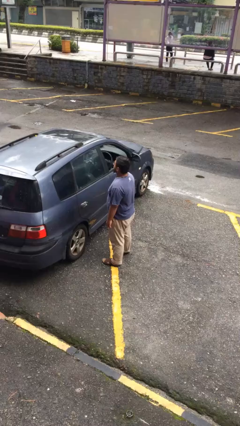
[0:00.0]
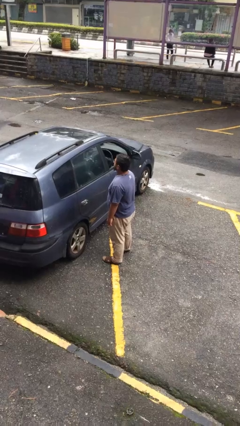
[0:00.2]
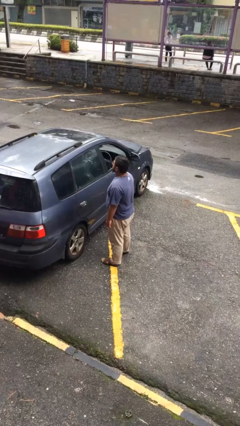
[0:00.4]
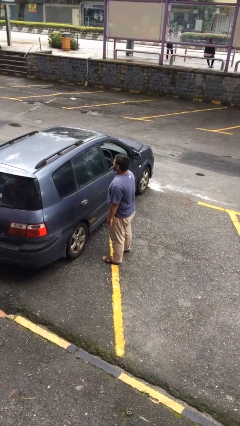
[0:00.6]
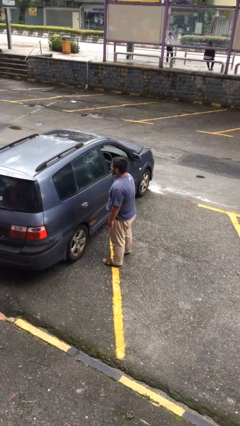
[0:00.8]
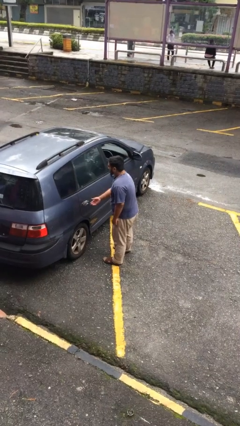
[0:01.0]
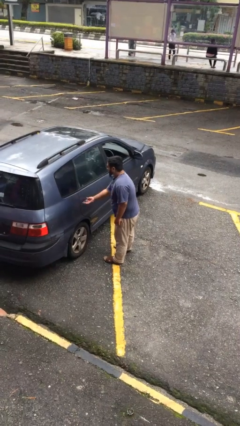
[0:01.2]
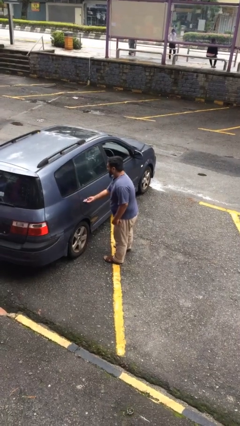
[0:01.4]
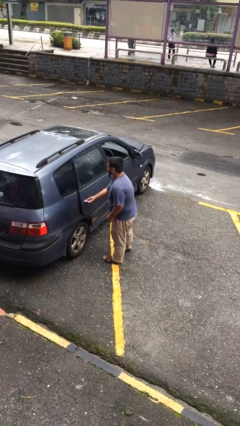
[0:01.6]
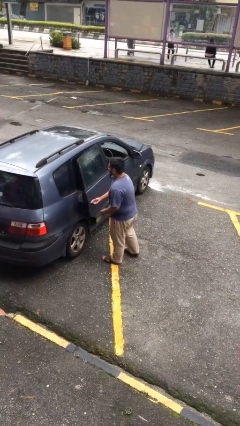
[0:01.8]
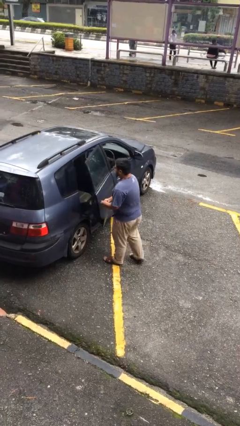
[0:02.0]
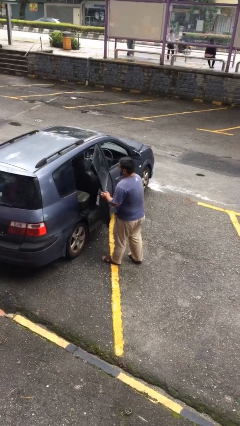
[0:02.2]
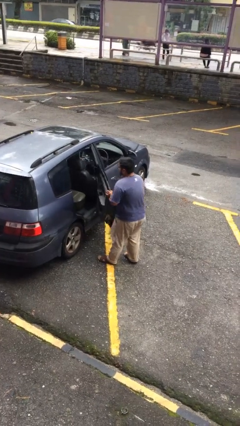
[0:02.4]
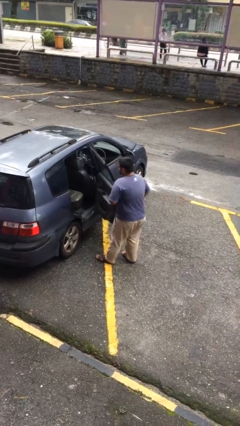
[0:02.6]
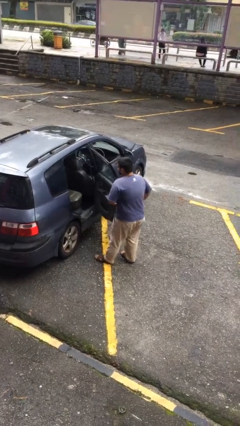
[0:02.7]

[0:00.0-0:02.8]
person opens car door

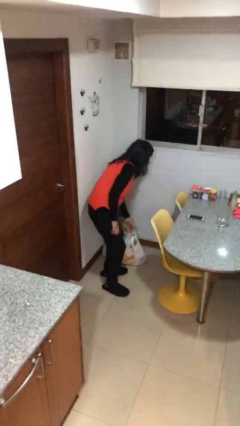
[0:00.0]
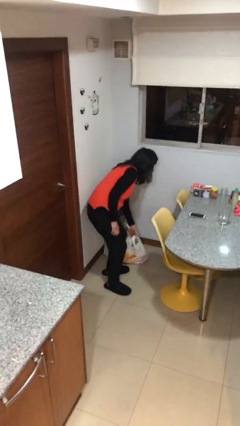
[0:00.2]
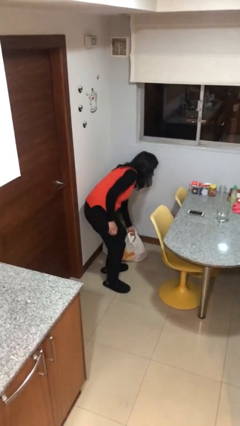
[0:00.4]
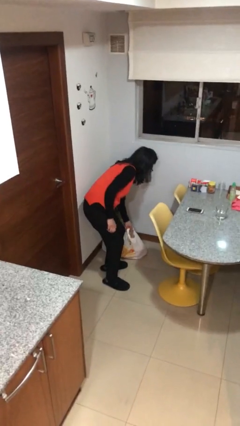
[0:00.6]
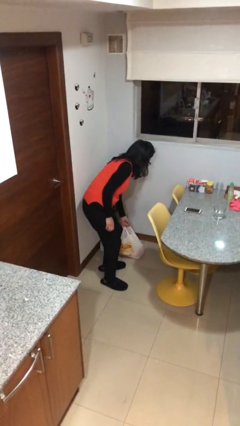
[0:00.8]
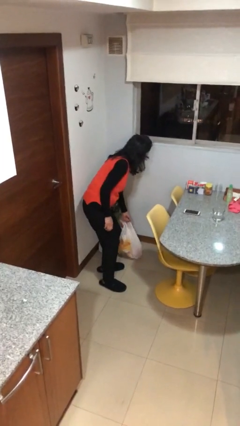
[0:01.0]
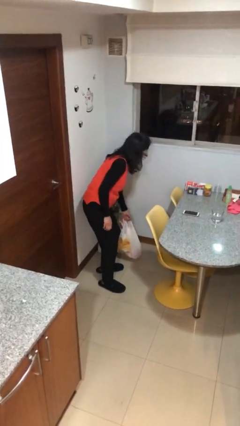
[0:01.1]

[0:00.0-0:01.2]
person picks up object from floor

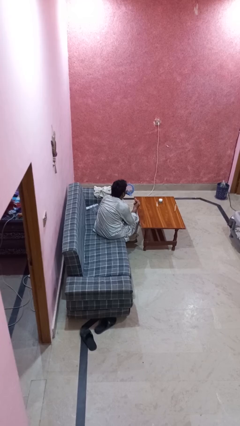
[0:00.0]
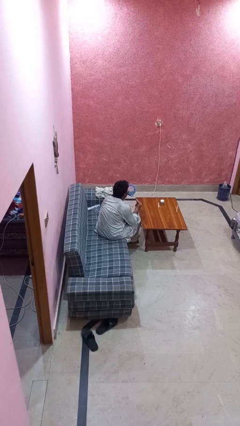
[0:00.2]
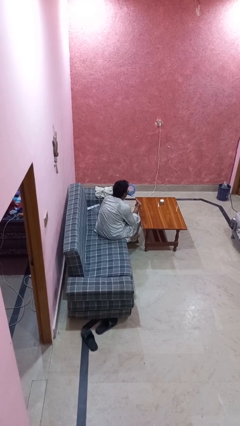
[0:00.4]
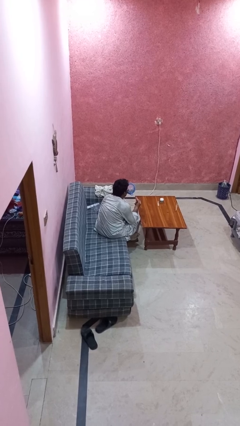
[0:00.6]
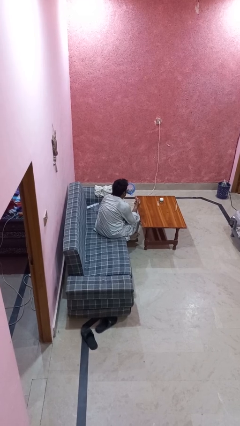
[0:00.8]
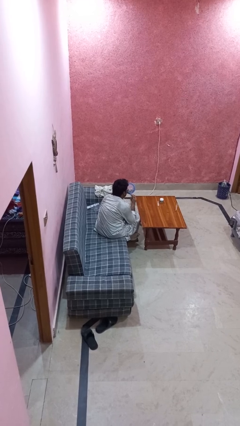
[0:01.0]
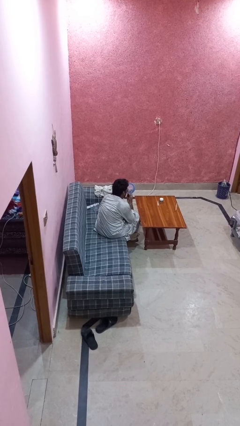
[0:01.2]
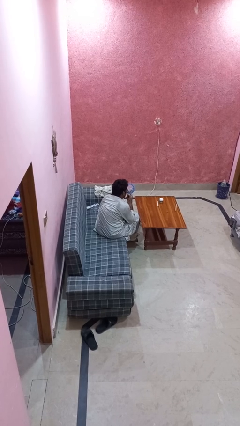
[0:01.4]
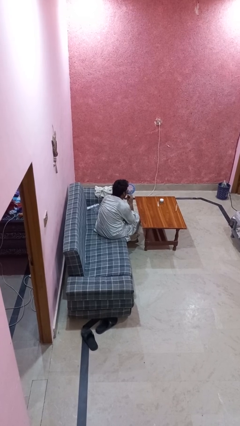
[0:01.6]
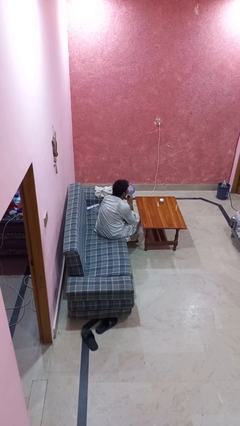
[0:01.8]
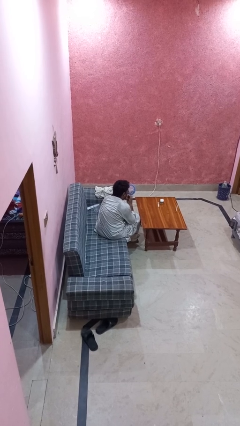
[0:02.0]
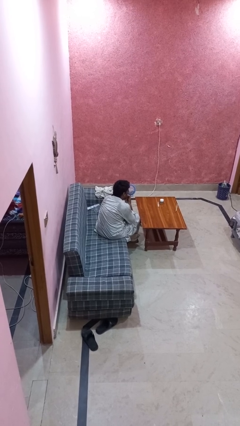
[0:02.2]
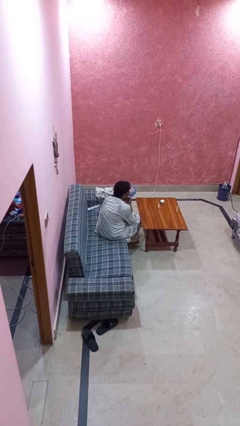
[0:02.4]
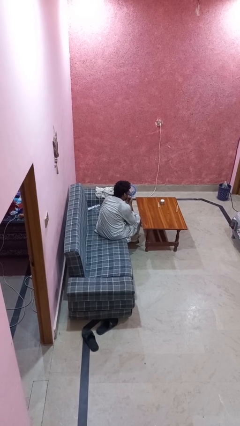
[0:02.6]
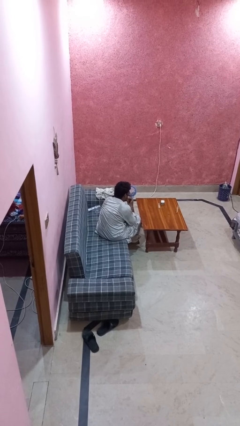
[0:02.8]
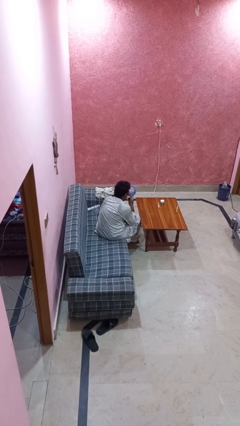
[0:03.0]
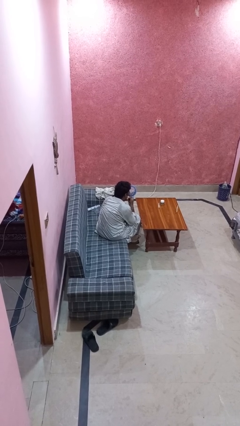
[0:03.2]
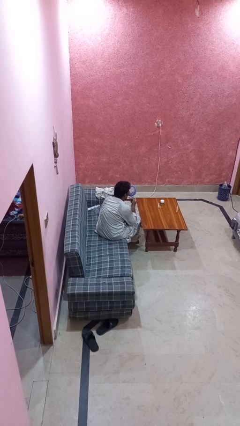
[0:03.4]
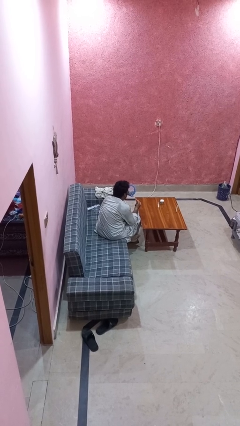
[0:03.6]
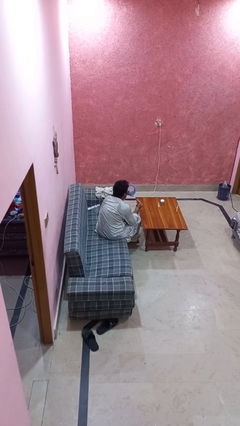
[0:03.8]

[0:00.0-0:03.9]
person applies lip makeup

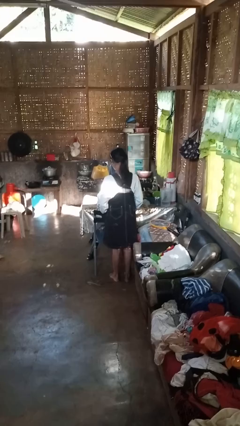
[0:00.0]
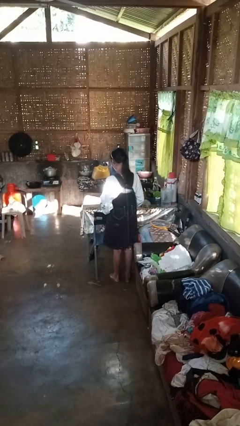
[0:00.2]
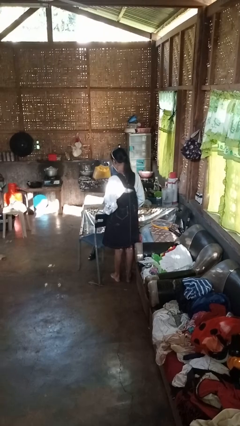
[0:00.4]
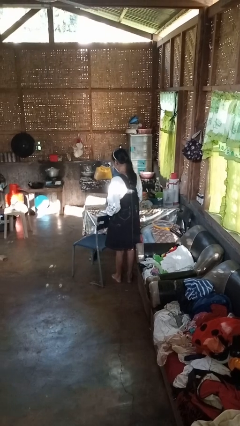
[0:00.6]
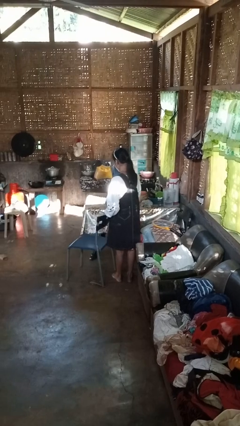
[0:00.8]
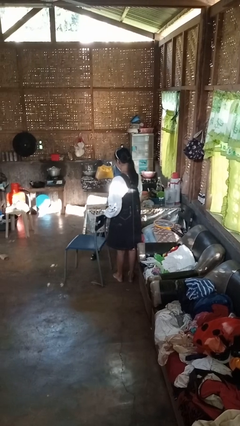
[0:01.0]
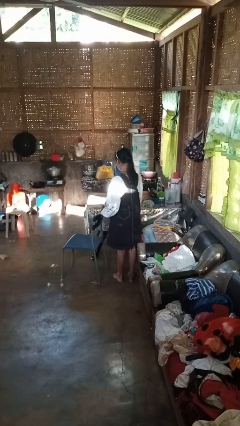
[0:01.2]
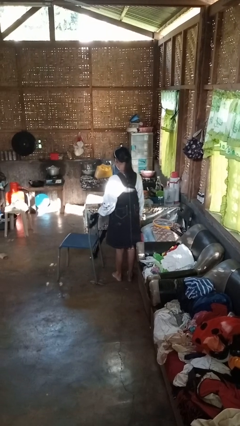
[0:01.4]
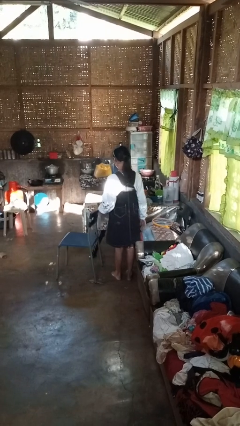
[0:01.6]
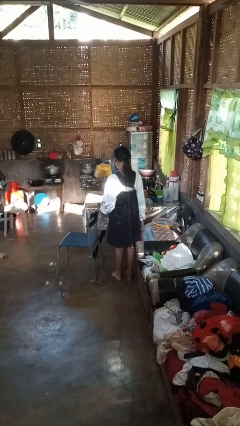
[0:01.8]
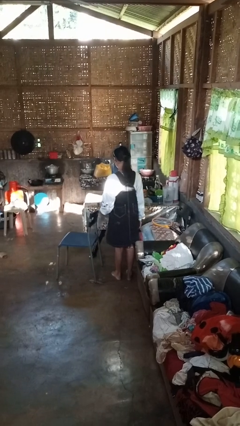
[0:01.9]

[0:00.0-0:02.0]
person pulls out chair

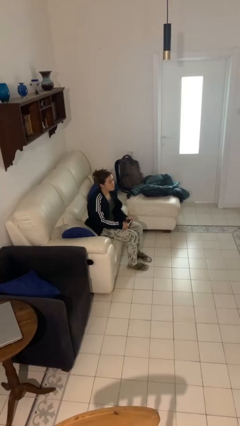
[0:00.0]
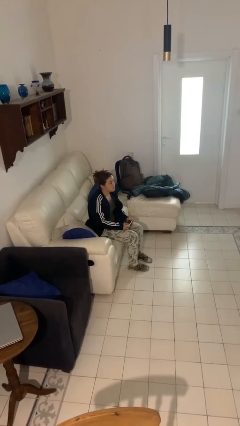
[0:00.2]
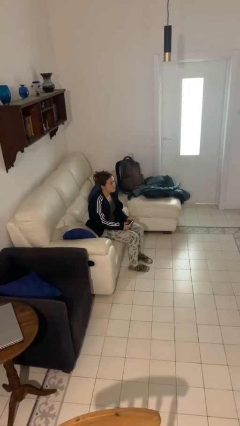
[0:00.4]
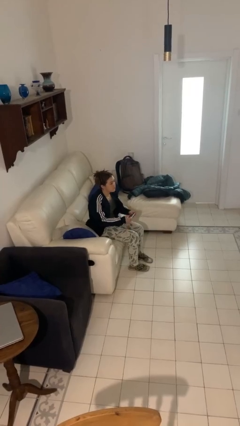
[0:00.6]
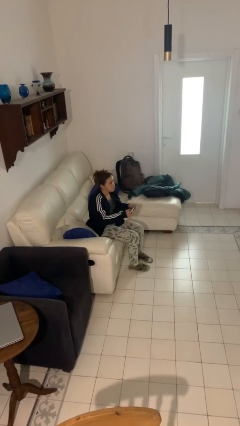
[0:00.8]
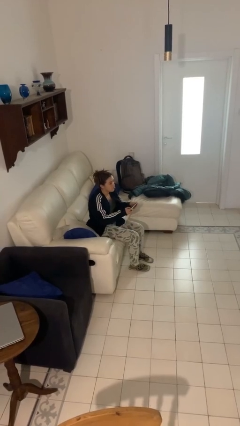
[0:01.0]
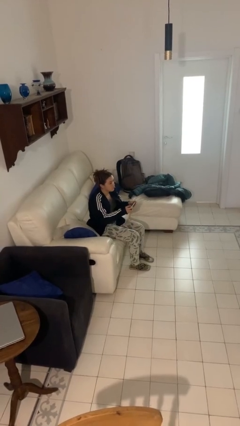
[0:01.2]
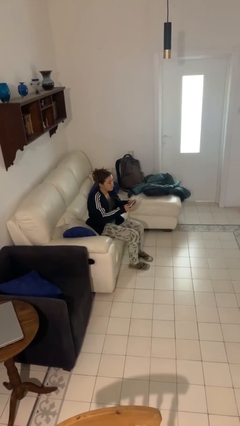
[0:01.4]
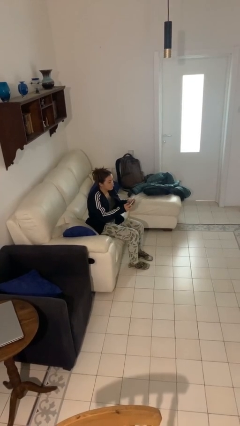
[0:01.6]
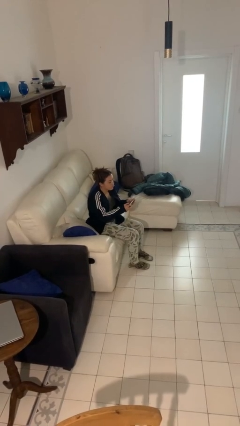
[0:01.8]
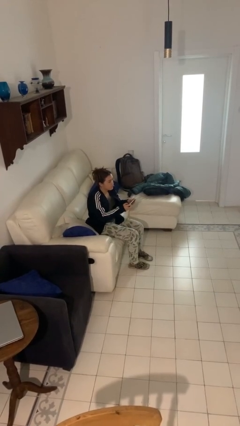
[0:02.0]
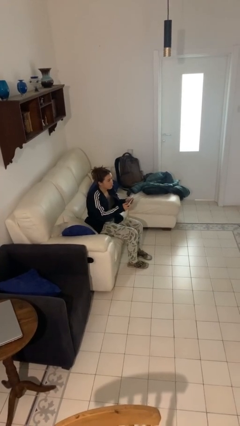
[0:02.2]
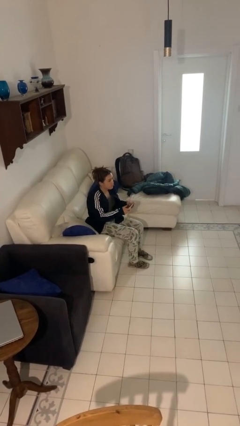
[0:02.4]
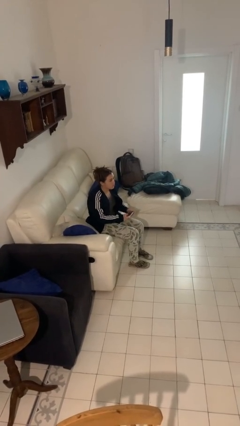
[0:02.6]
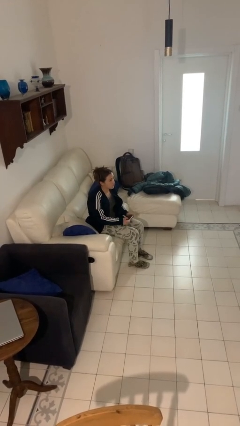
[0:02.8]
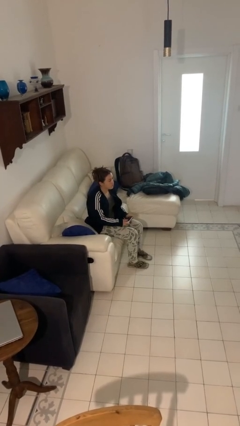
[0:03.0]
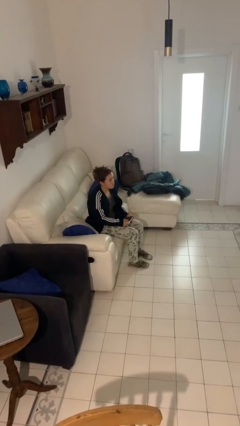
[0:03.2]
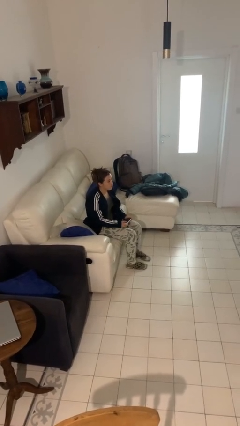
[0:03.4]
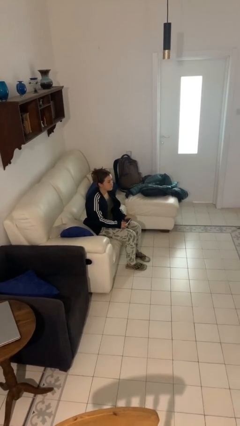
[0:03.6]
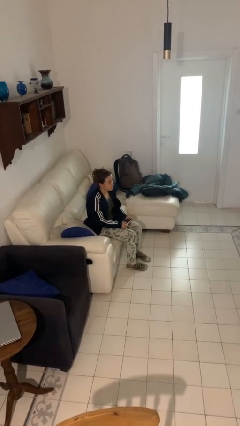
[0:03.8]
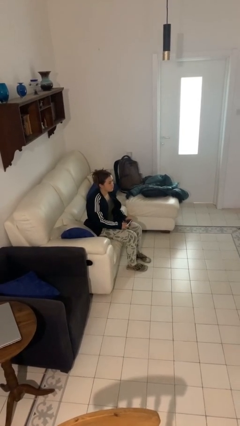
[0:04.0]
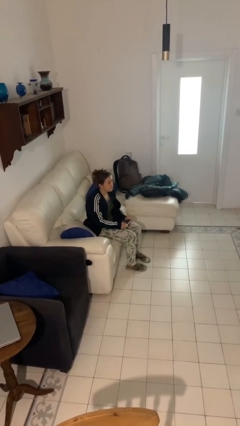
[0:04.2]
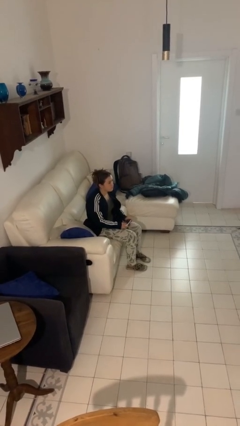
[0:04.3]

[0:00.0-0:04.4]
person interacts with handheld game

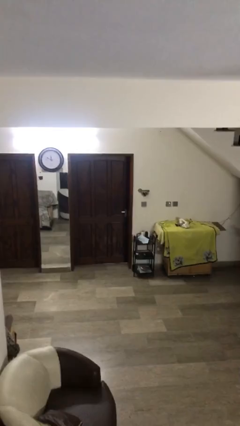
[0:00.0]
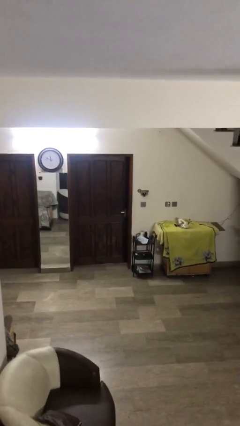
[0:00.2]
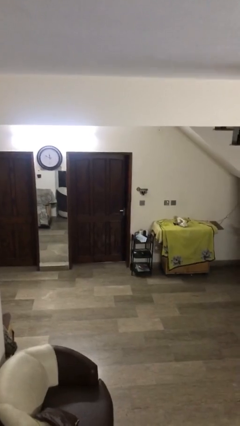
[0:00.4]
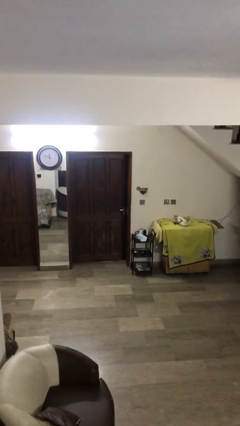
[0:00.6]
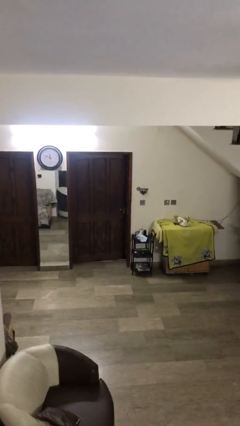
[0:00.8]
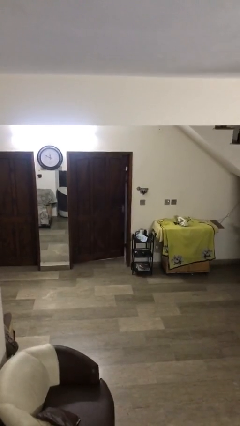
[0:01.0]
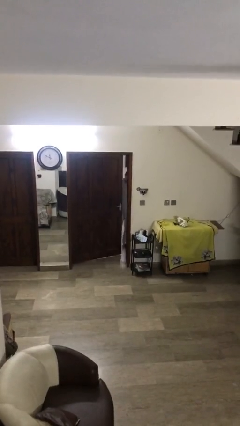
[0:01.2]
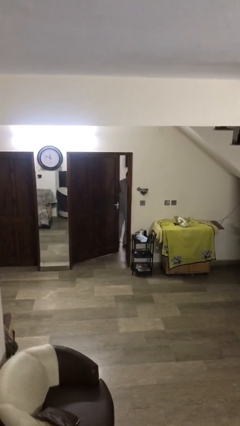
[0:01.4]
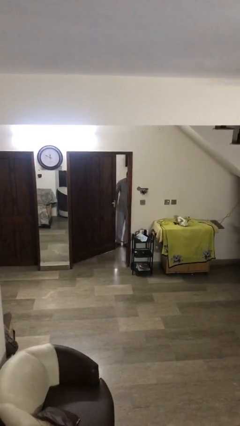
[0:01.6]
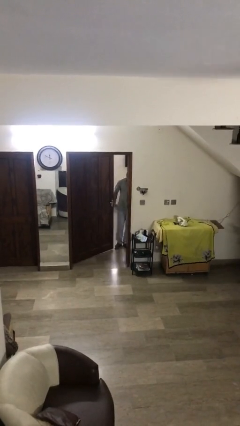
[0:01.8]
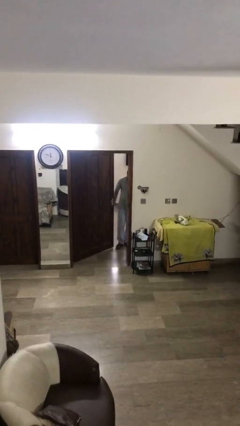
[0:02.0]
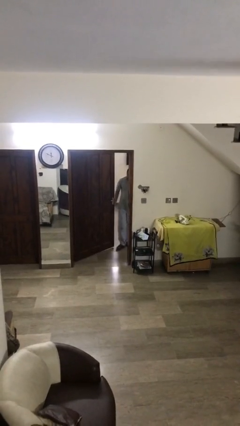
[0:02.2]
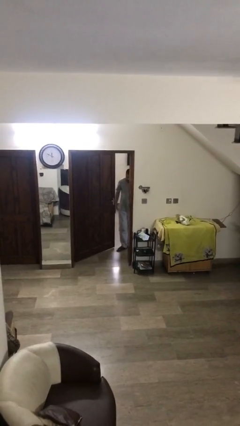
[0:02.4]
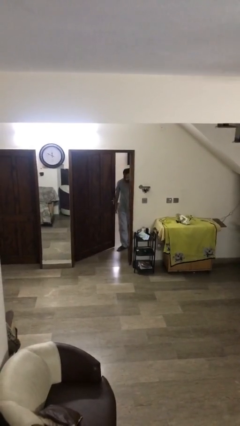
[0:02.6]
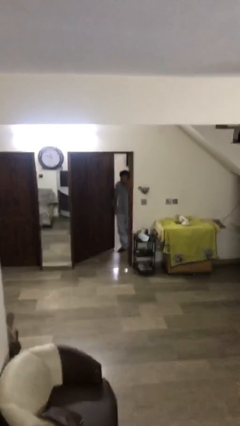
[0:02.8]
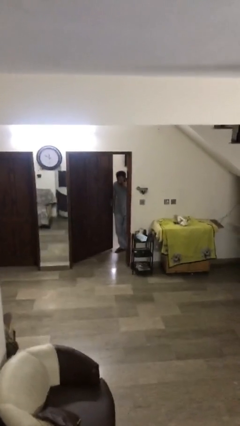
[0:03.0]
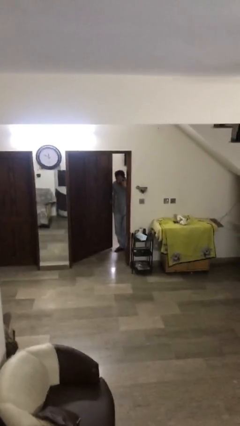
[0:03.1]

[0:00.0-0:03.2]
person opens facility door
